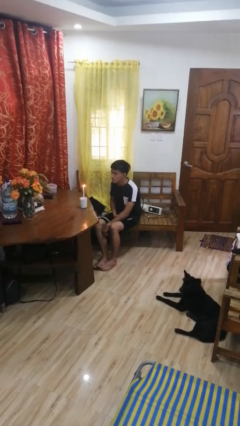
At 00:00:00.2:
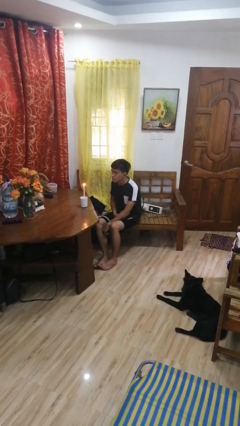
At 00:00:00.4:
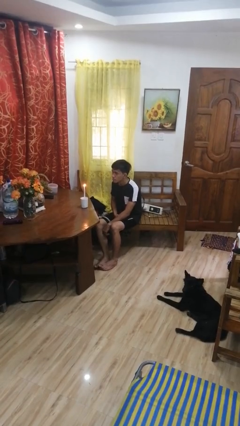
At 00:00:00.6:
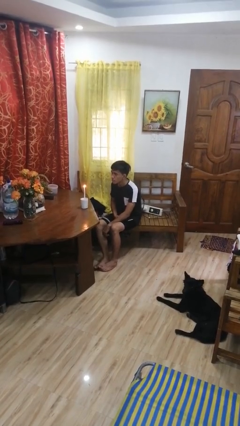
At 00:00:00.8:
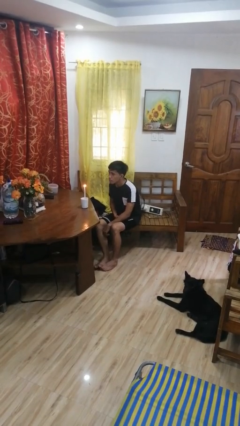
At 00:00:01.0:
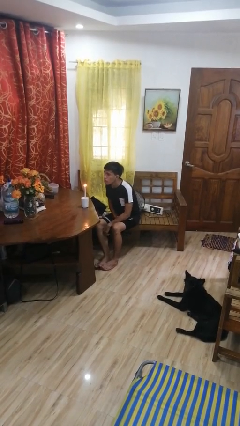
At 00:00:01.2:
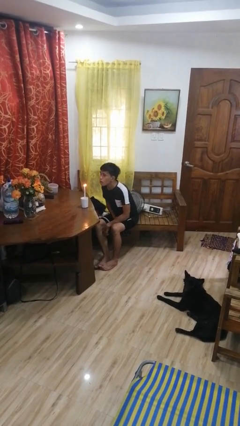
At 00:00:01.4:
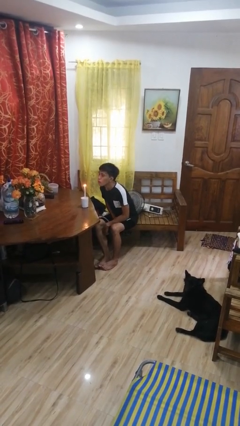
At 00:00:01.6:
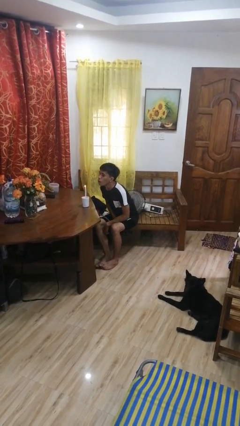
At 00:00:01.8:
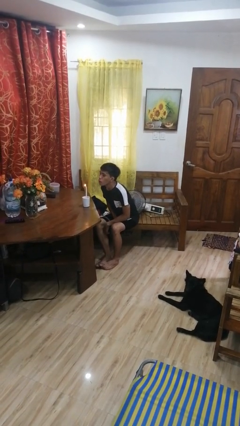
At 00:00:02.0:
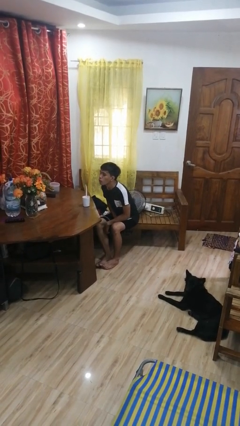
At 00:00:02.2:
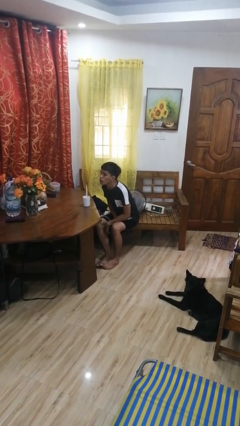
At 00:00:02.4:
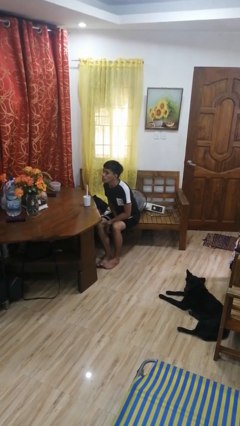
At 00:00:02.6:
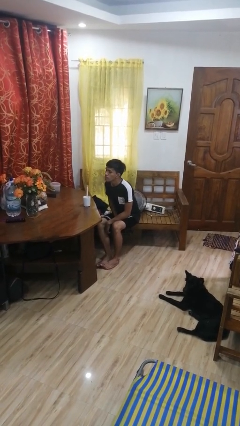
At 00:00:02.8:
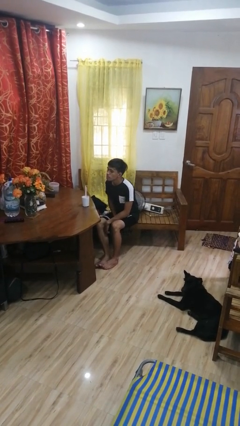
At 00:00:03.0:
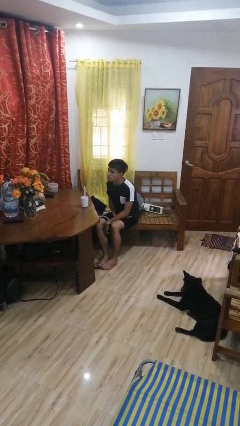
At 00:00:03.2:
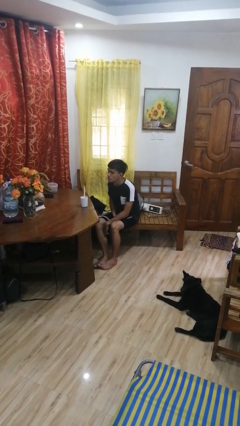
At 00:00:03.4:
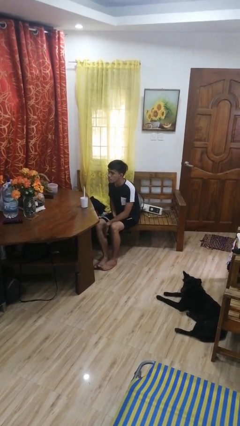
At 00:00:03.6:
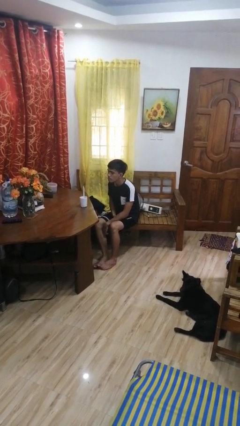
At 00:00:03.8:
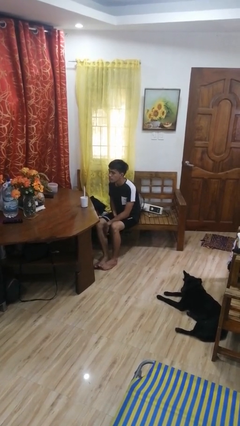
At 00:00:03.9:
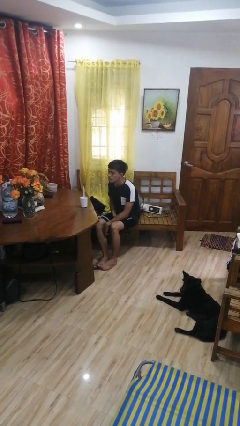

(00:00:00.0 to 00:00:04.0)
person extinguishes candle

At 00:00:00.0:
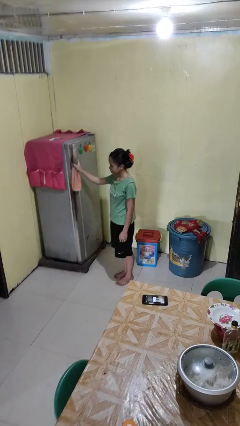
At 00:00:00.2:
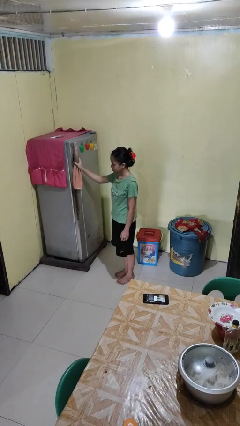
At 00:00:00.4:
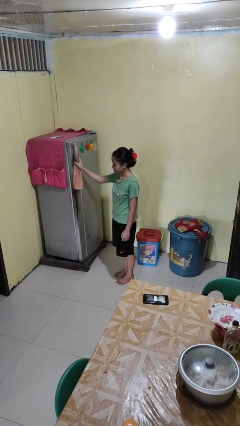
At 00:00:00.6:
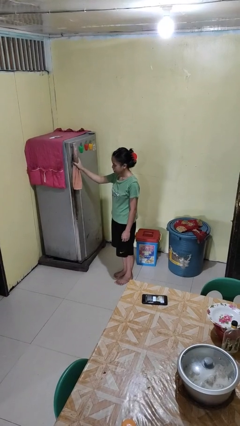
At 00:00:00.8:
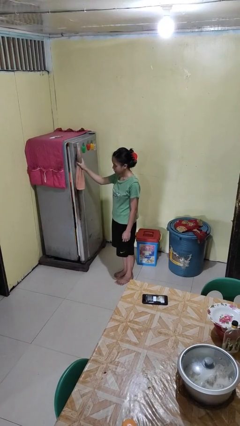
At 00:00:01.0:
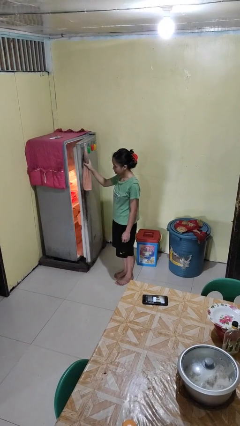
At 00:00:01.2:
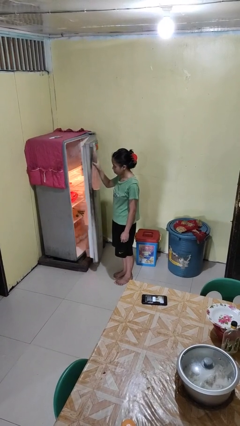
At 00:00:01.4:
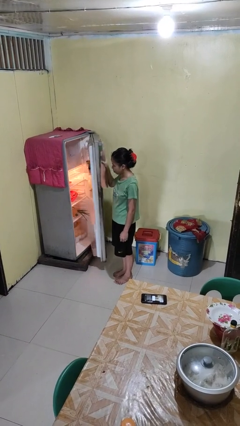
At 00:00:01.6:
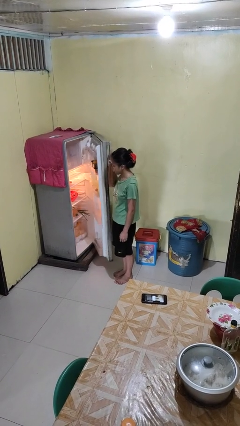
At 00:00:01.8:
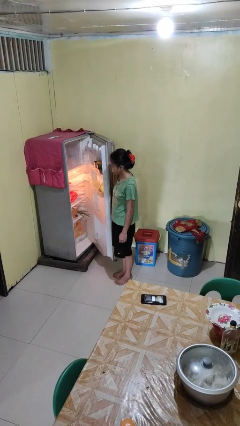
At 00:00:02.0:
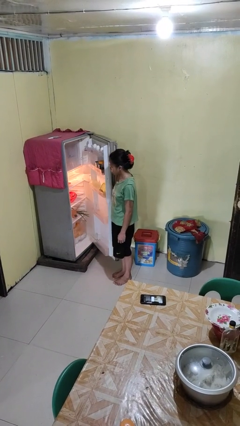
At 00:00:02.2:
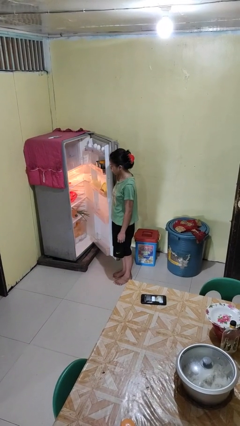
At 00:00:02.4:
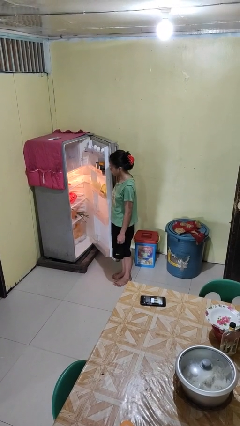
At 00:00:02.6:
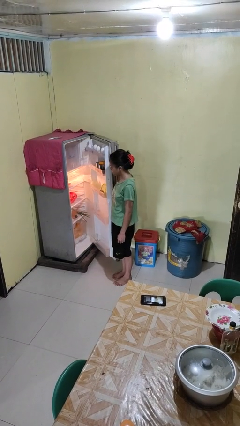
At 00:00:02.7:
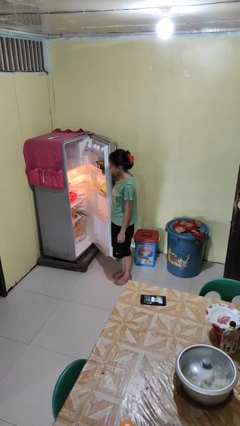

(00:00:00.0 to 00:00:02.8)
person opens refrigerator

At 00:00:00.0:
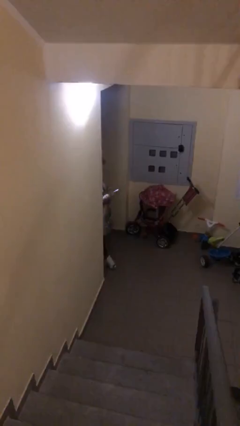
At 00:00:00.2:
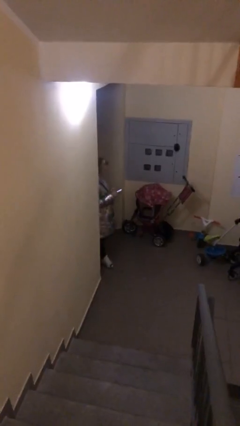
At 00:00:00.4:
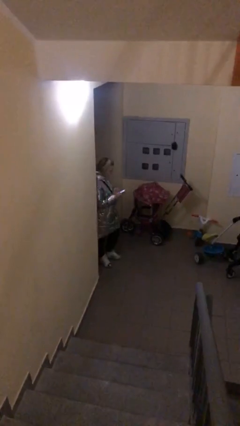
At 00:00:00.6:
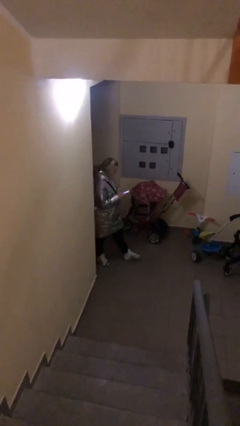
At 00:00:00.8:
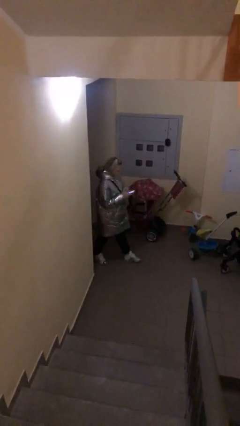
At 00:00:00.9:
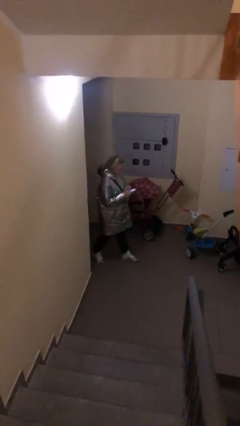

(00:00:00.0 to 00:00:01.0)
person enters scene through structure

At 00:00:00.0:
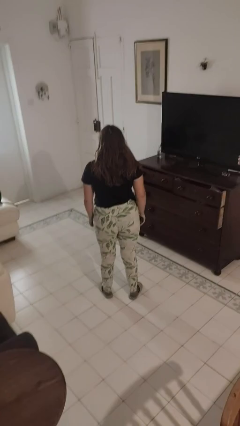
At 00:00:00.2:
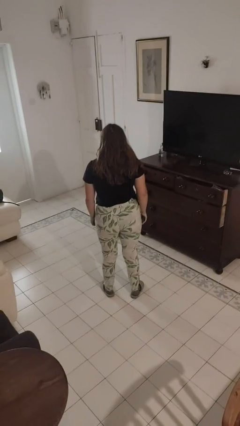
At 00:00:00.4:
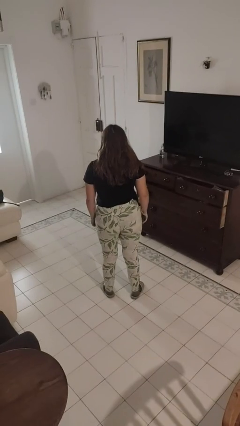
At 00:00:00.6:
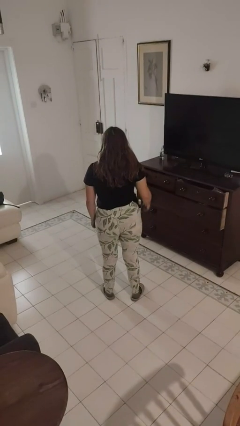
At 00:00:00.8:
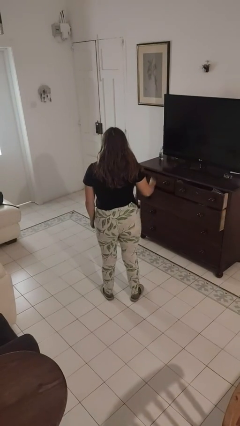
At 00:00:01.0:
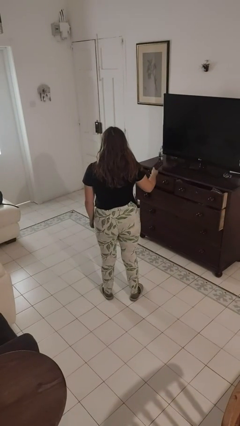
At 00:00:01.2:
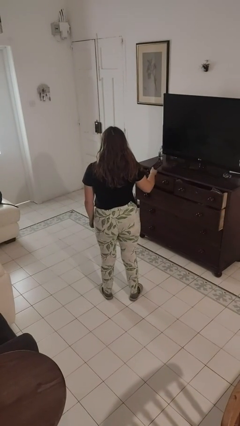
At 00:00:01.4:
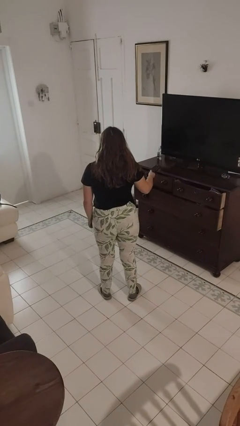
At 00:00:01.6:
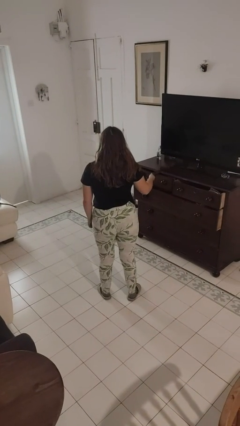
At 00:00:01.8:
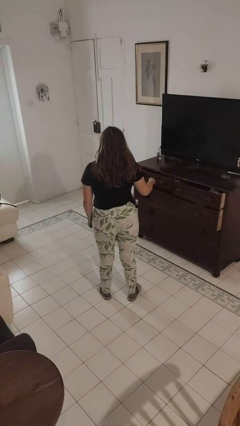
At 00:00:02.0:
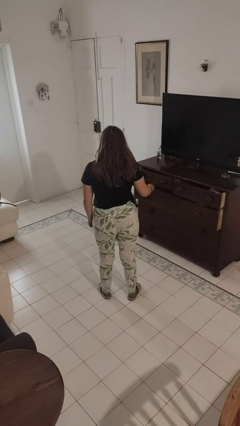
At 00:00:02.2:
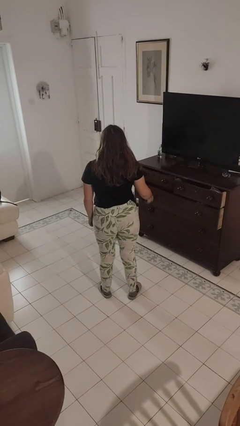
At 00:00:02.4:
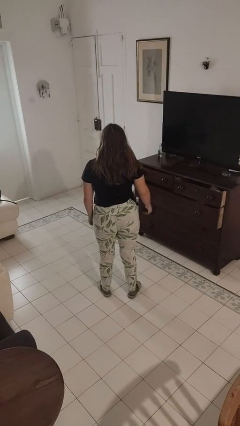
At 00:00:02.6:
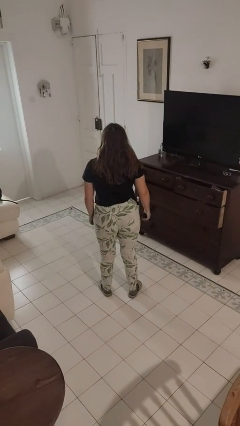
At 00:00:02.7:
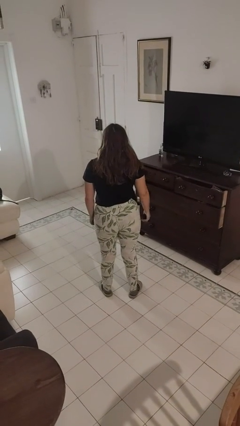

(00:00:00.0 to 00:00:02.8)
person uses television remote

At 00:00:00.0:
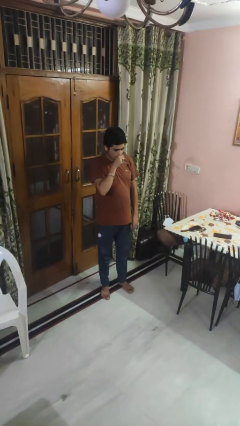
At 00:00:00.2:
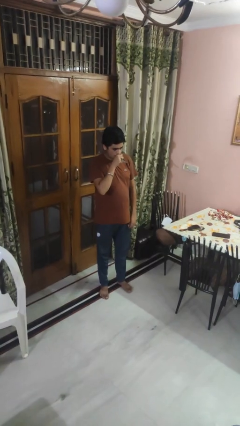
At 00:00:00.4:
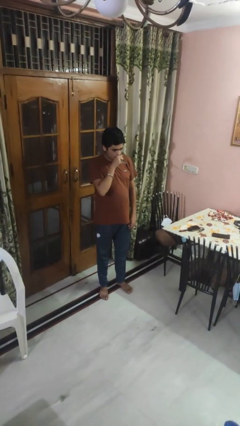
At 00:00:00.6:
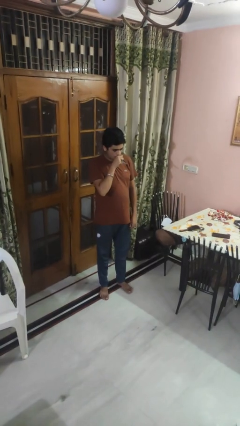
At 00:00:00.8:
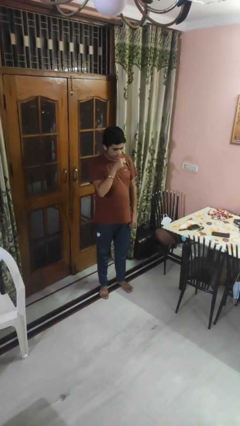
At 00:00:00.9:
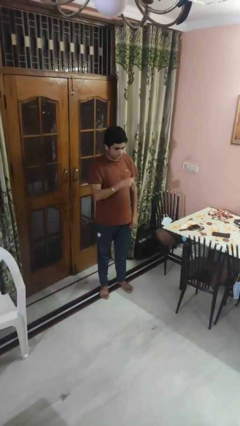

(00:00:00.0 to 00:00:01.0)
person vapes

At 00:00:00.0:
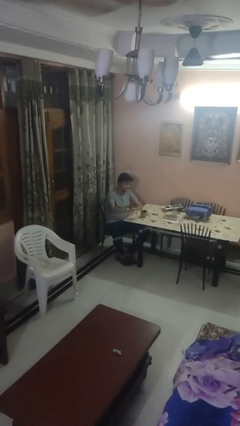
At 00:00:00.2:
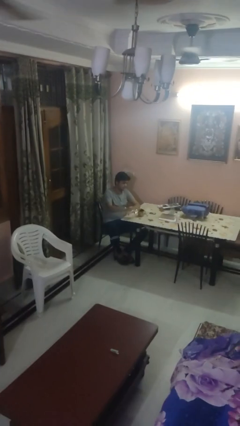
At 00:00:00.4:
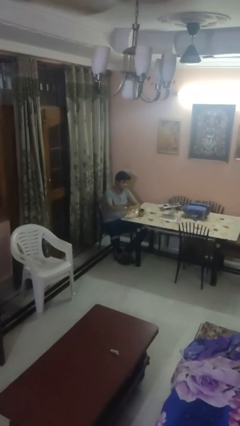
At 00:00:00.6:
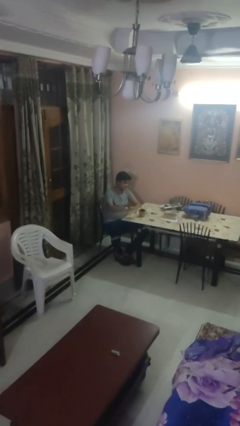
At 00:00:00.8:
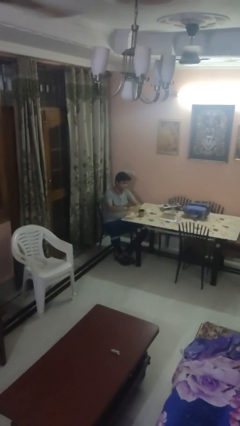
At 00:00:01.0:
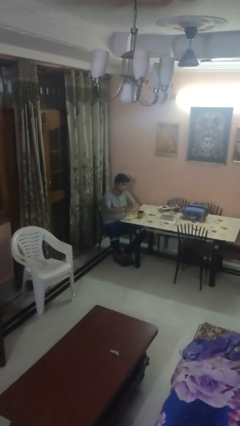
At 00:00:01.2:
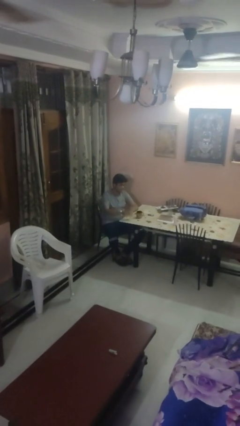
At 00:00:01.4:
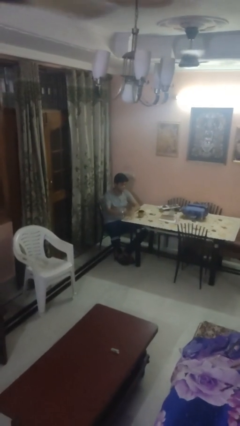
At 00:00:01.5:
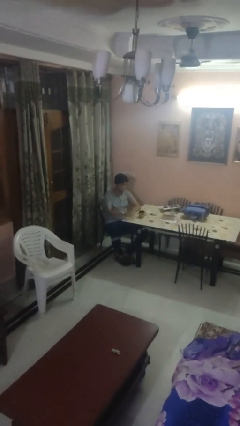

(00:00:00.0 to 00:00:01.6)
person pours liquid into cup

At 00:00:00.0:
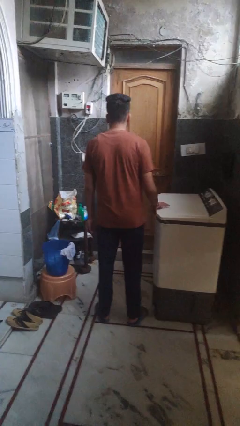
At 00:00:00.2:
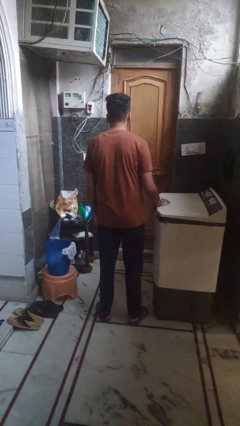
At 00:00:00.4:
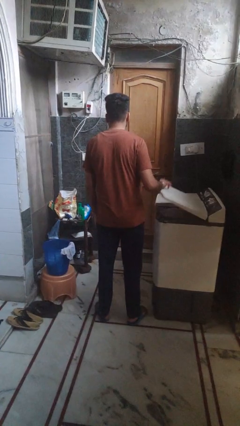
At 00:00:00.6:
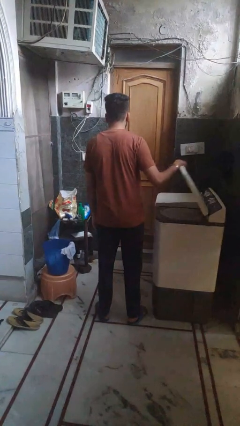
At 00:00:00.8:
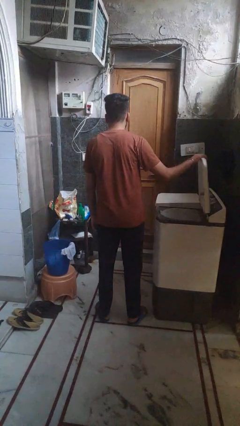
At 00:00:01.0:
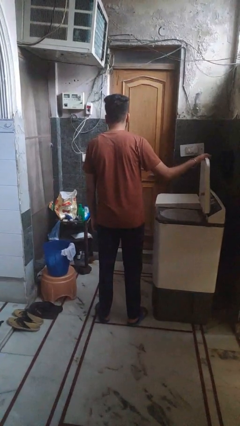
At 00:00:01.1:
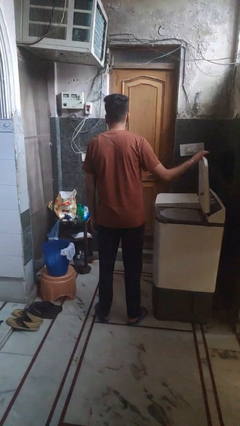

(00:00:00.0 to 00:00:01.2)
person opens clothes washer

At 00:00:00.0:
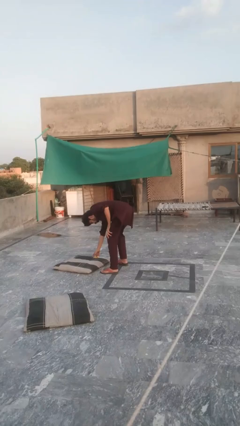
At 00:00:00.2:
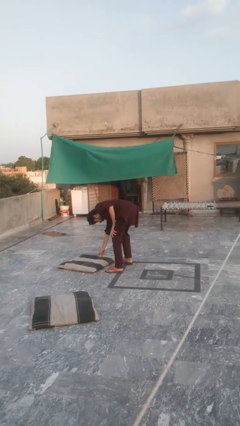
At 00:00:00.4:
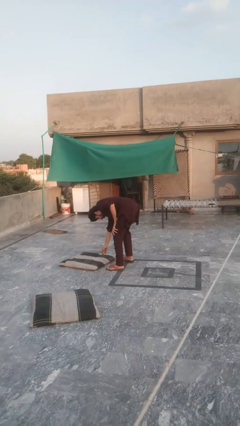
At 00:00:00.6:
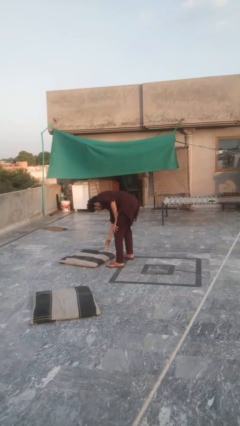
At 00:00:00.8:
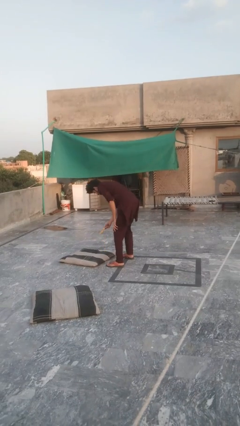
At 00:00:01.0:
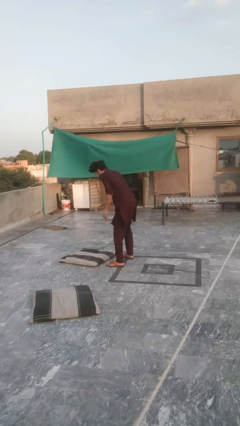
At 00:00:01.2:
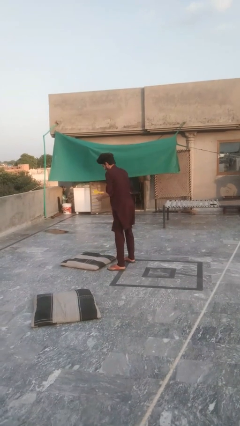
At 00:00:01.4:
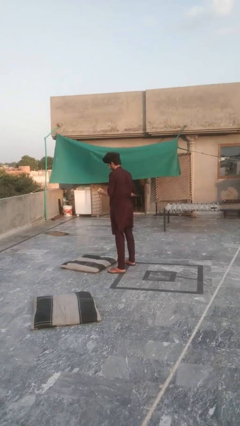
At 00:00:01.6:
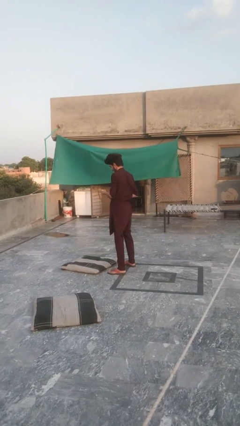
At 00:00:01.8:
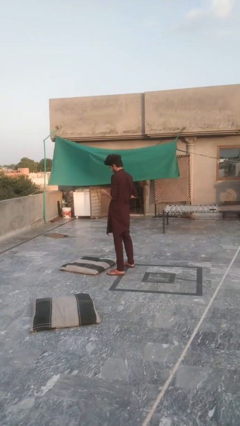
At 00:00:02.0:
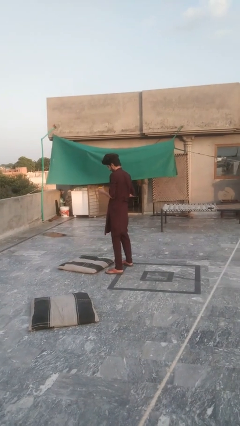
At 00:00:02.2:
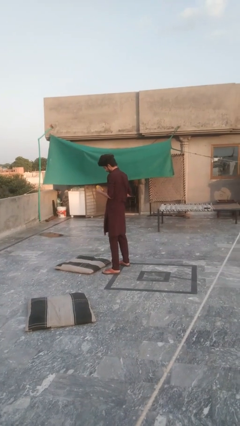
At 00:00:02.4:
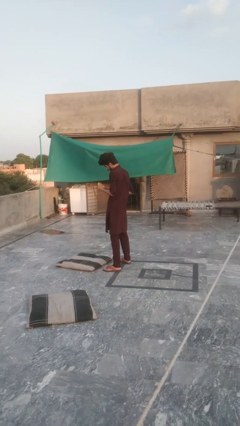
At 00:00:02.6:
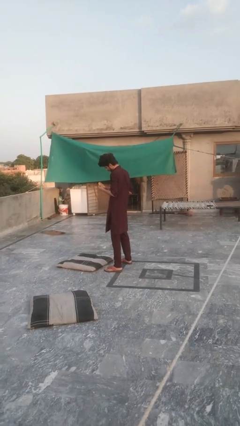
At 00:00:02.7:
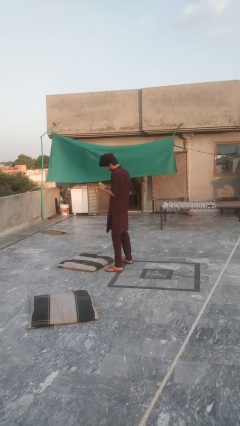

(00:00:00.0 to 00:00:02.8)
person picks up object from floor
